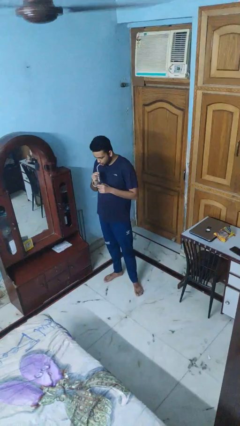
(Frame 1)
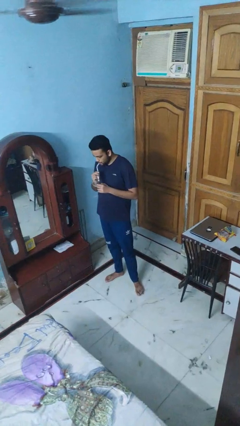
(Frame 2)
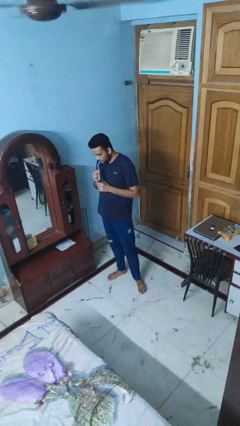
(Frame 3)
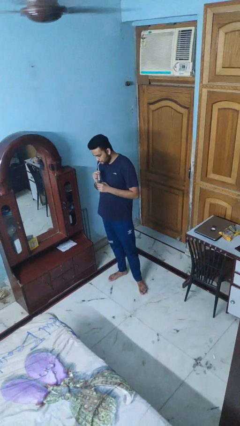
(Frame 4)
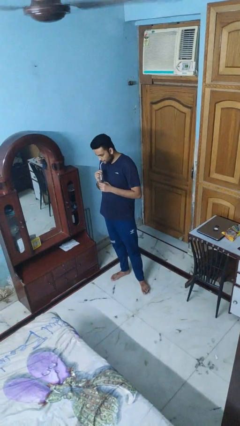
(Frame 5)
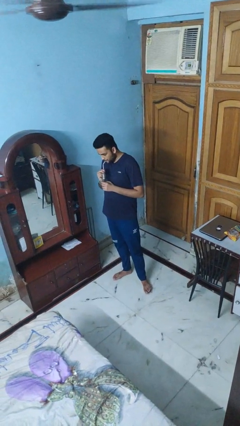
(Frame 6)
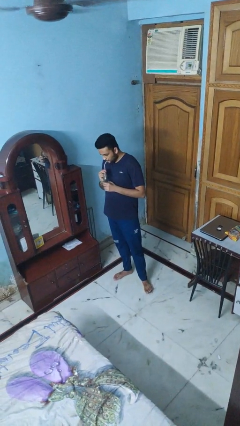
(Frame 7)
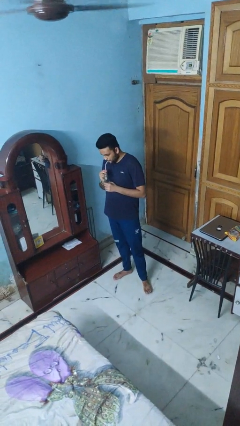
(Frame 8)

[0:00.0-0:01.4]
person drinks from straw

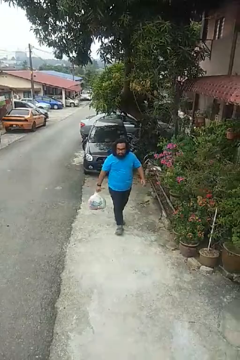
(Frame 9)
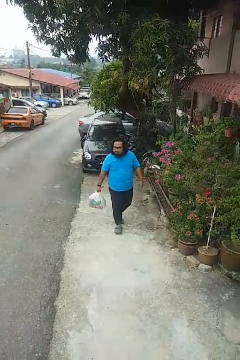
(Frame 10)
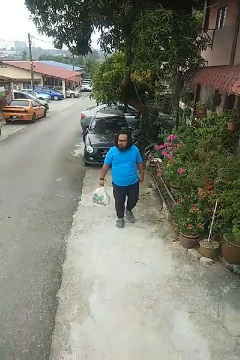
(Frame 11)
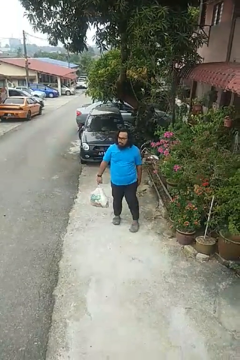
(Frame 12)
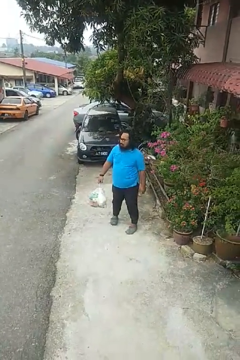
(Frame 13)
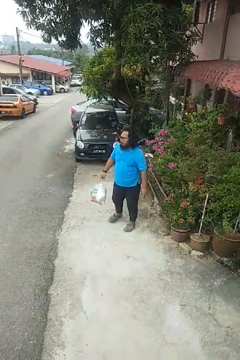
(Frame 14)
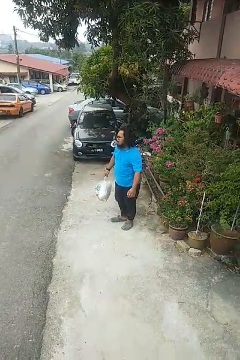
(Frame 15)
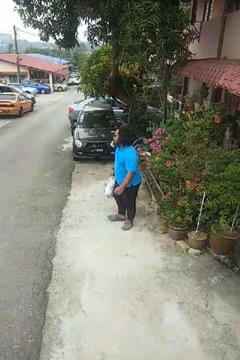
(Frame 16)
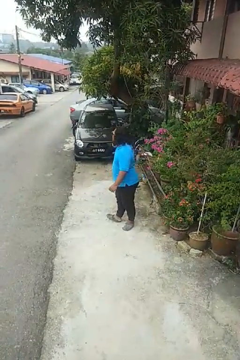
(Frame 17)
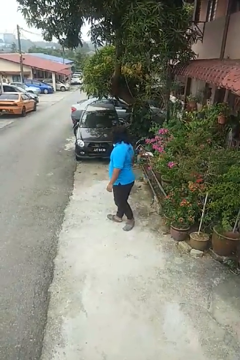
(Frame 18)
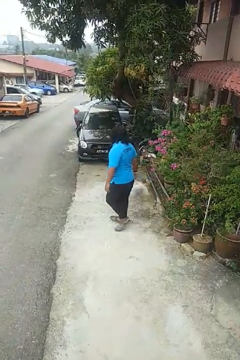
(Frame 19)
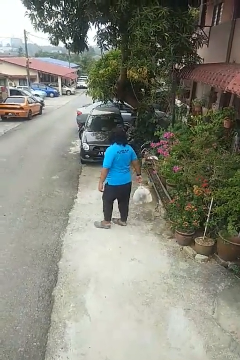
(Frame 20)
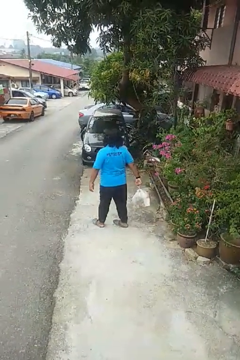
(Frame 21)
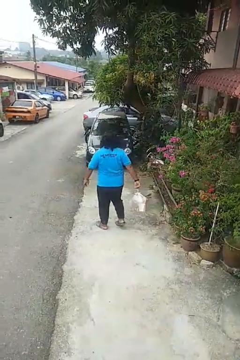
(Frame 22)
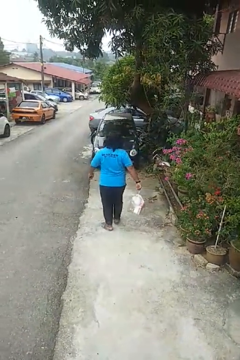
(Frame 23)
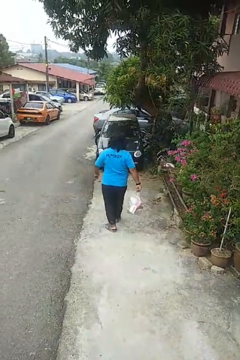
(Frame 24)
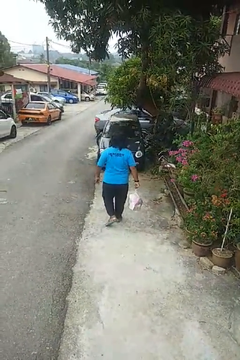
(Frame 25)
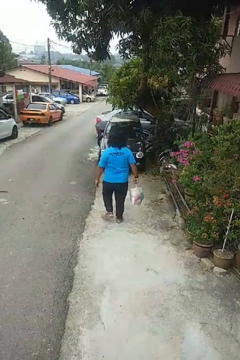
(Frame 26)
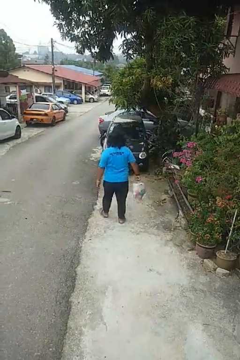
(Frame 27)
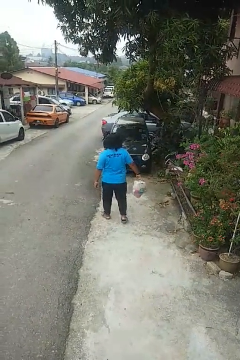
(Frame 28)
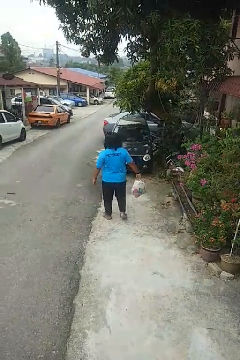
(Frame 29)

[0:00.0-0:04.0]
person carries groceries

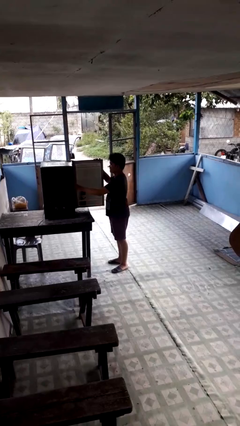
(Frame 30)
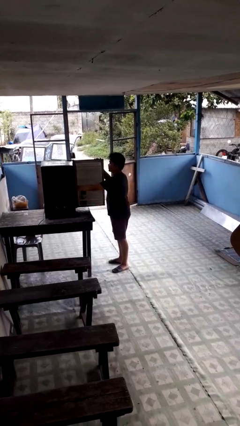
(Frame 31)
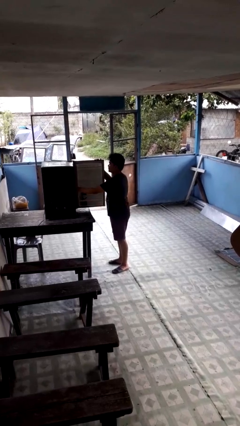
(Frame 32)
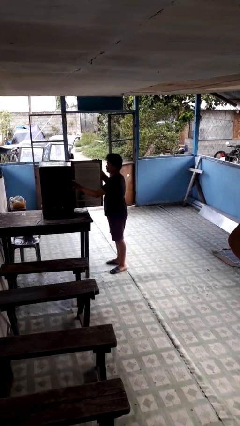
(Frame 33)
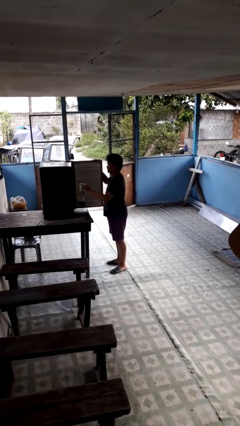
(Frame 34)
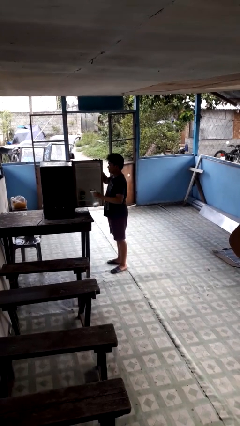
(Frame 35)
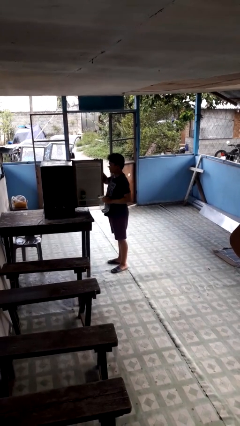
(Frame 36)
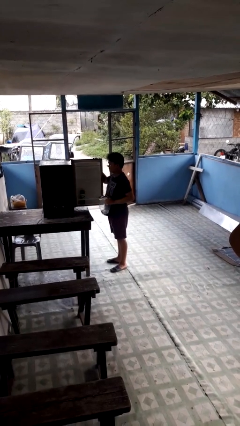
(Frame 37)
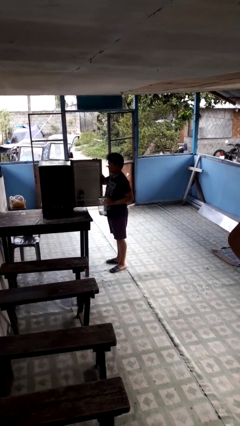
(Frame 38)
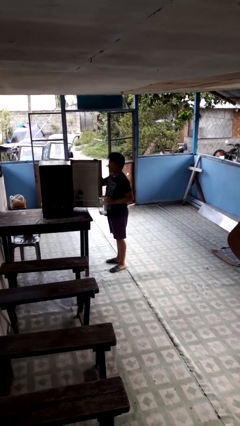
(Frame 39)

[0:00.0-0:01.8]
person takes object from refrigerator

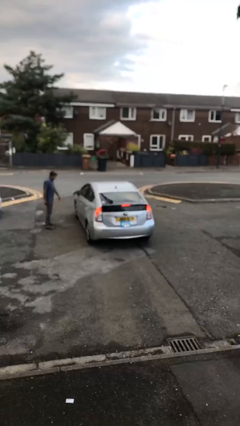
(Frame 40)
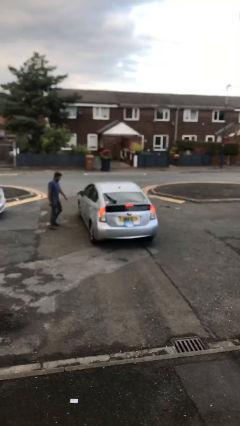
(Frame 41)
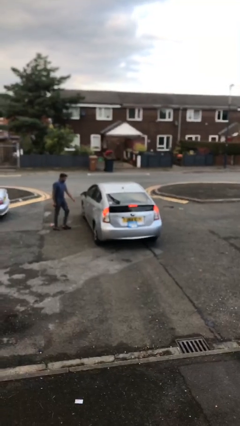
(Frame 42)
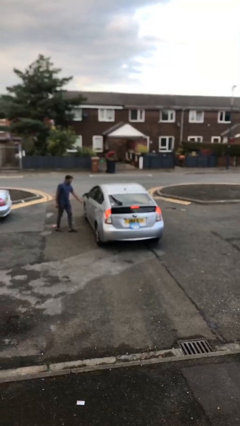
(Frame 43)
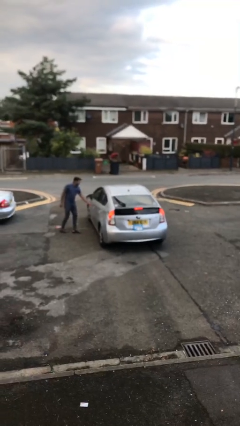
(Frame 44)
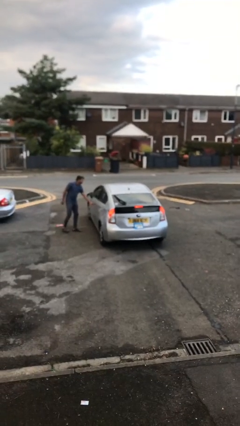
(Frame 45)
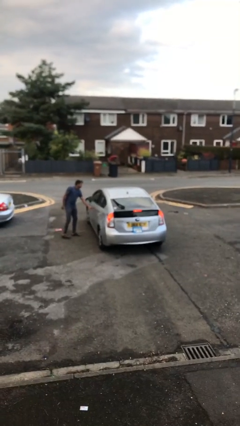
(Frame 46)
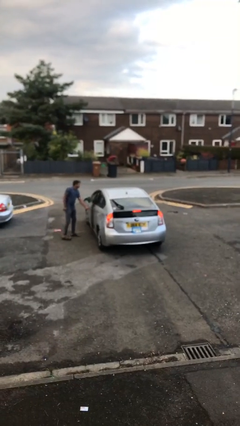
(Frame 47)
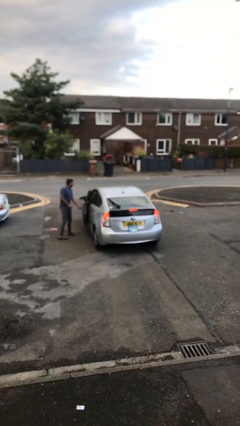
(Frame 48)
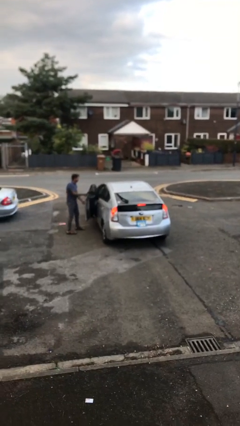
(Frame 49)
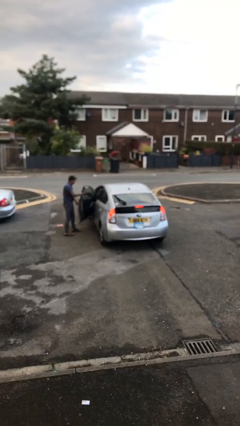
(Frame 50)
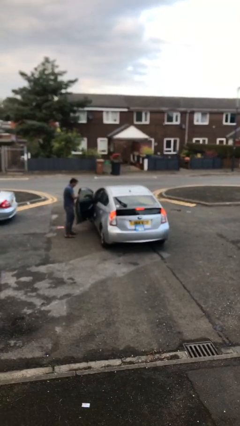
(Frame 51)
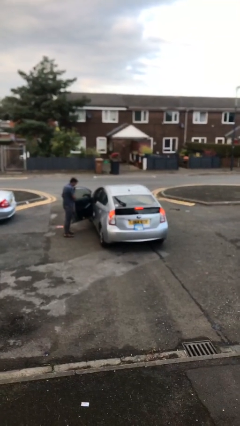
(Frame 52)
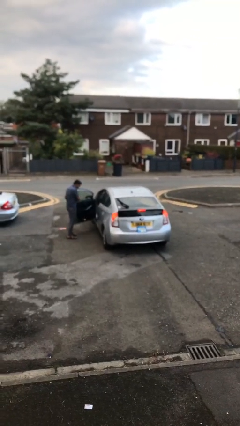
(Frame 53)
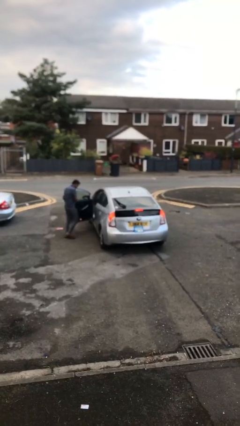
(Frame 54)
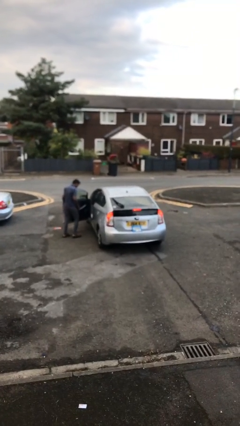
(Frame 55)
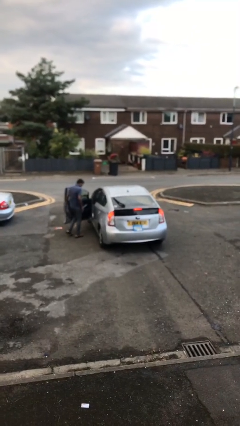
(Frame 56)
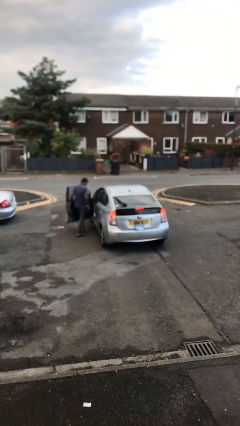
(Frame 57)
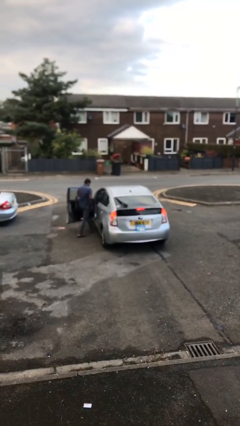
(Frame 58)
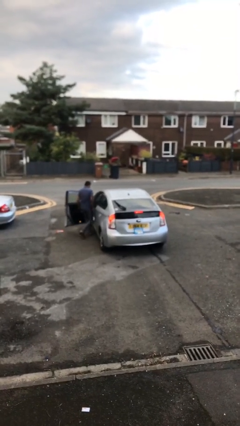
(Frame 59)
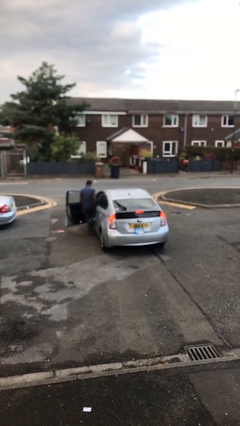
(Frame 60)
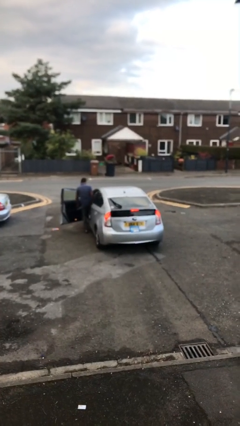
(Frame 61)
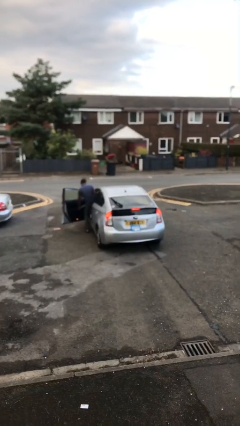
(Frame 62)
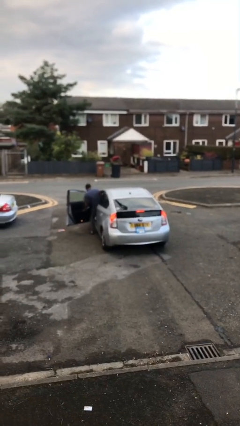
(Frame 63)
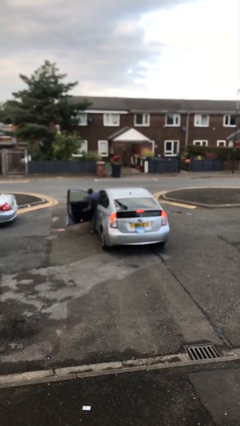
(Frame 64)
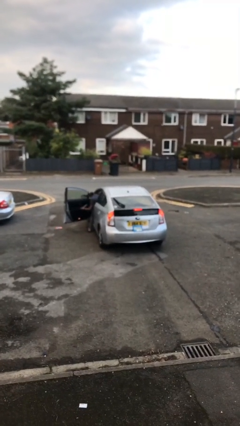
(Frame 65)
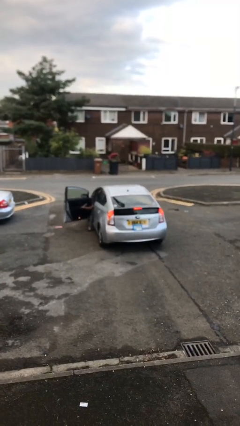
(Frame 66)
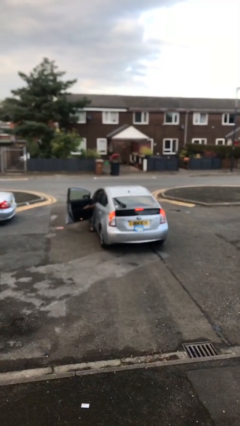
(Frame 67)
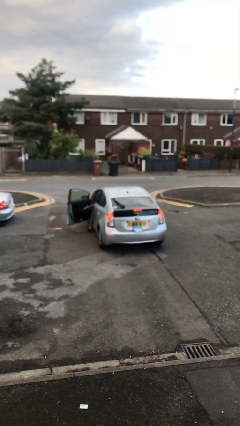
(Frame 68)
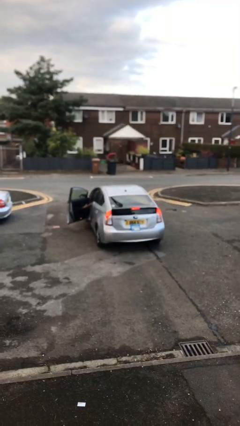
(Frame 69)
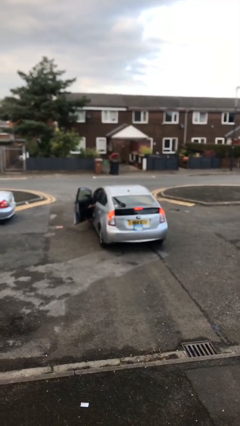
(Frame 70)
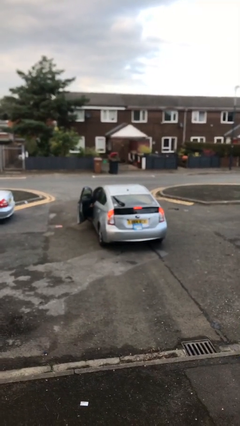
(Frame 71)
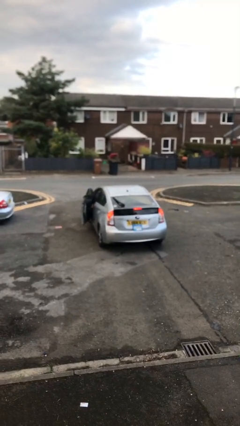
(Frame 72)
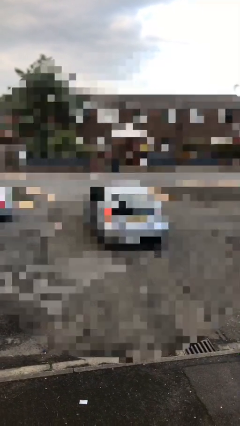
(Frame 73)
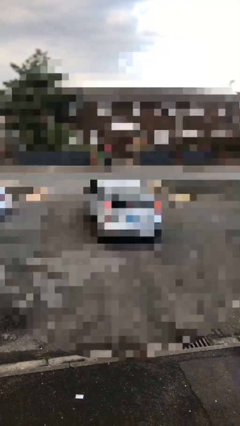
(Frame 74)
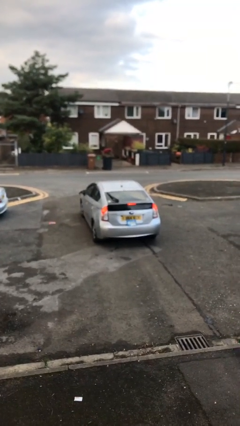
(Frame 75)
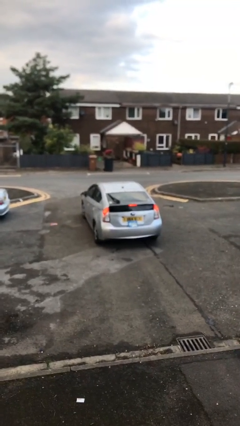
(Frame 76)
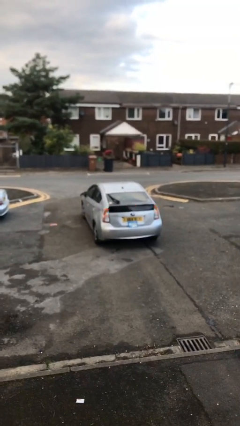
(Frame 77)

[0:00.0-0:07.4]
car picks up person

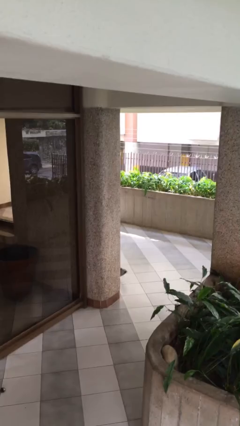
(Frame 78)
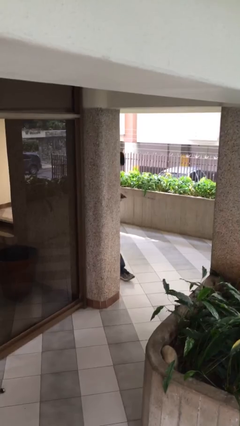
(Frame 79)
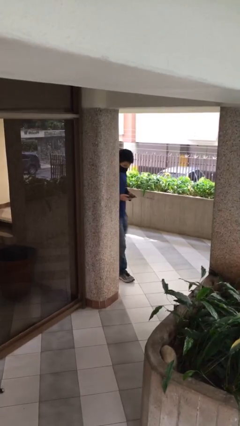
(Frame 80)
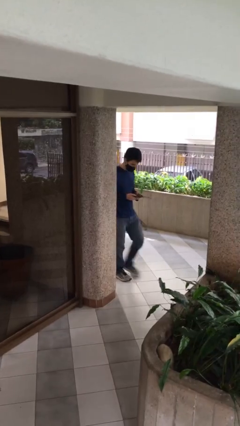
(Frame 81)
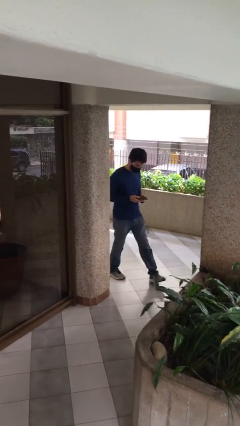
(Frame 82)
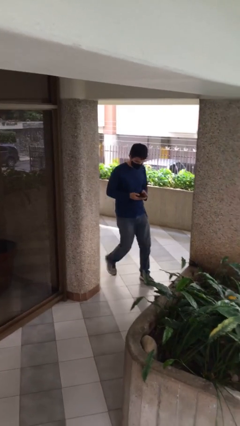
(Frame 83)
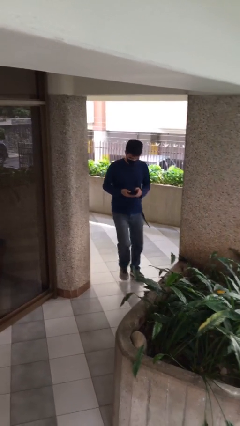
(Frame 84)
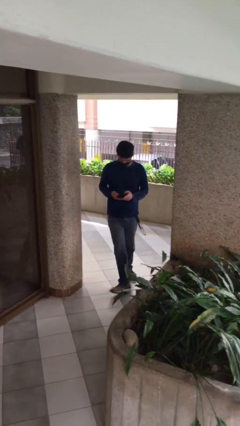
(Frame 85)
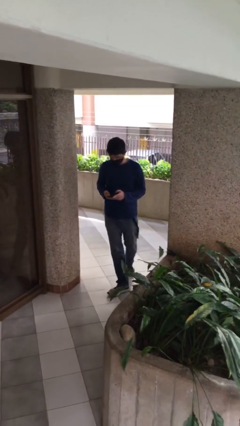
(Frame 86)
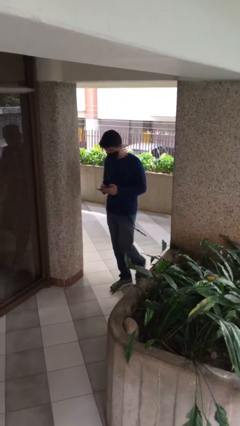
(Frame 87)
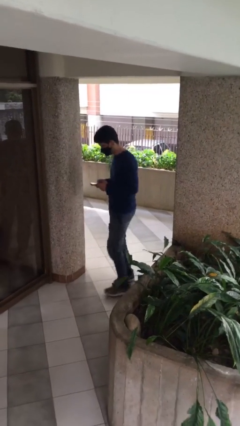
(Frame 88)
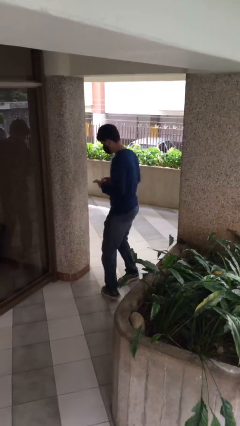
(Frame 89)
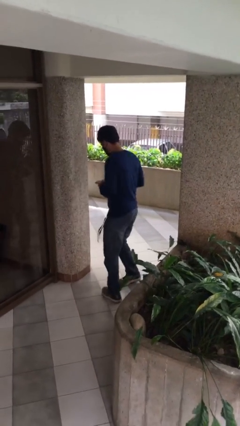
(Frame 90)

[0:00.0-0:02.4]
person enters scene through structure

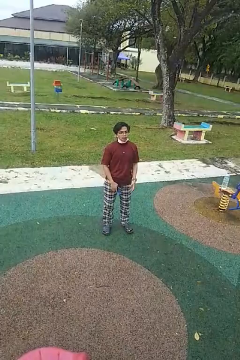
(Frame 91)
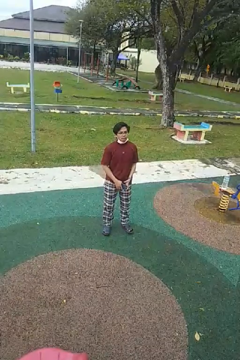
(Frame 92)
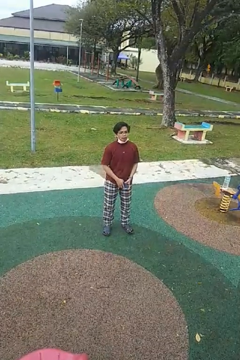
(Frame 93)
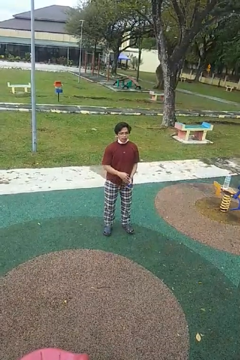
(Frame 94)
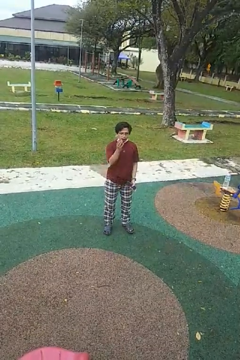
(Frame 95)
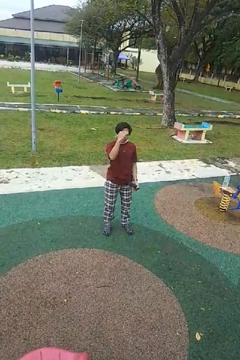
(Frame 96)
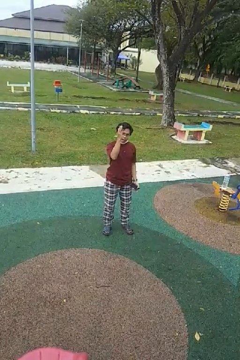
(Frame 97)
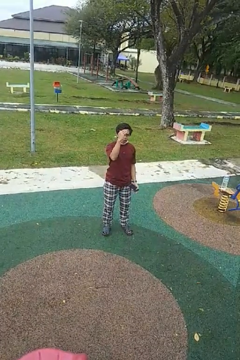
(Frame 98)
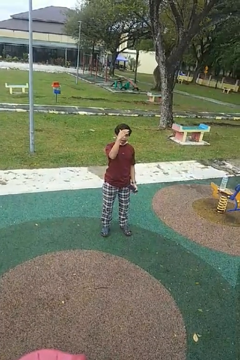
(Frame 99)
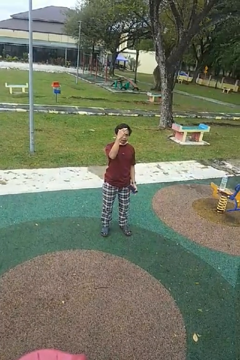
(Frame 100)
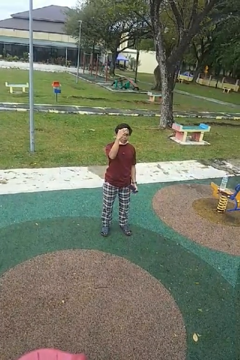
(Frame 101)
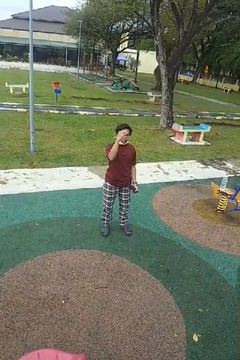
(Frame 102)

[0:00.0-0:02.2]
person gestures come here
